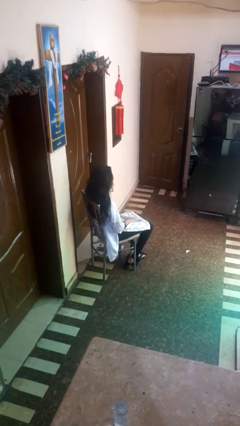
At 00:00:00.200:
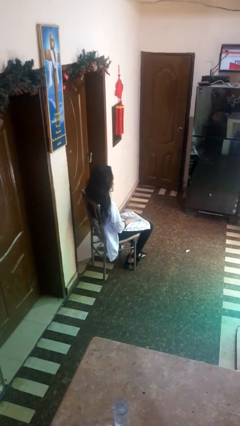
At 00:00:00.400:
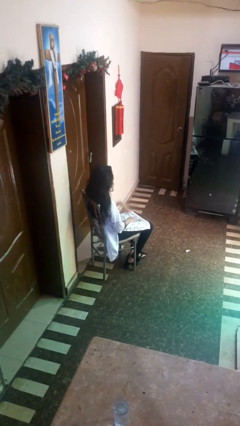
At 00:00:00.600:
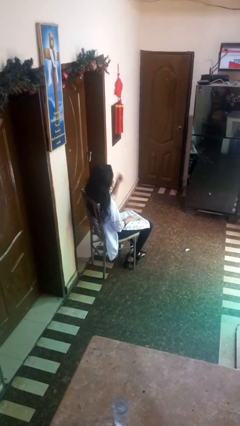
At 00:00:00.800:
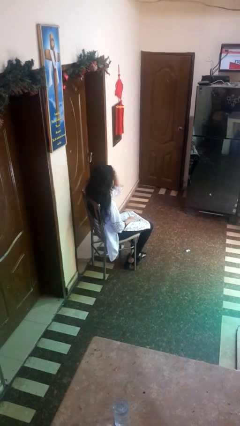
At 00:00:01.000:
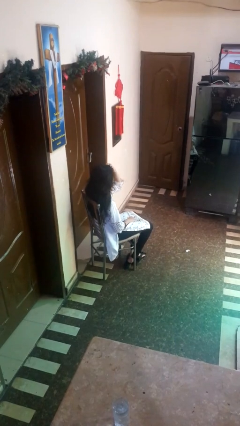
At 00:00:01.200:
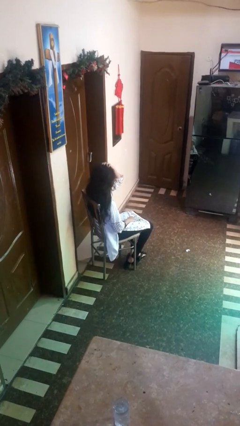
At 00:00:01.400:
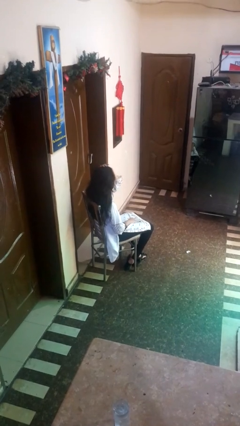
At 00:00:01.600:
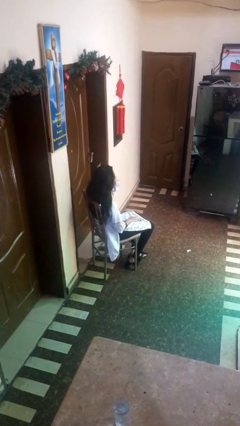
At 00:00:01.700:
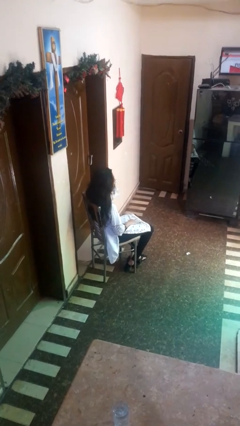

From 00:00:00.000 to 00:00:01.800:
person strokes hair

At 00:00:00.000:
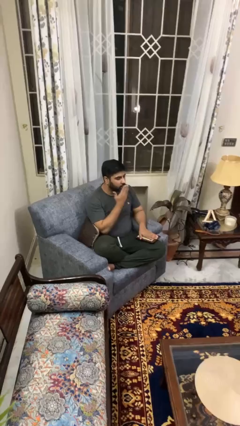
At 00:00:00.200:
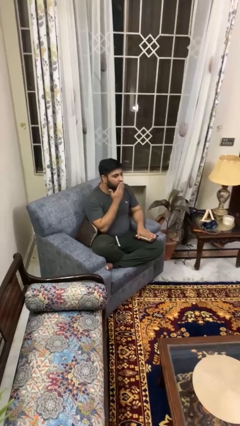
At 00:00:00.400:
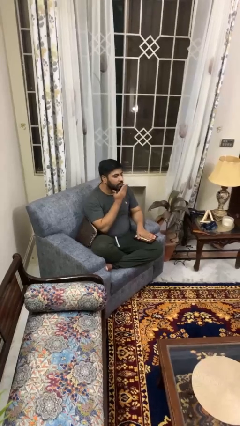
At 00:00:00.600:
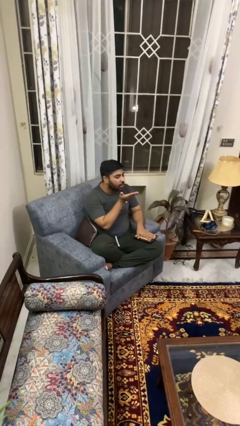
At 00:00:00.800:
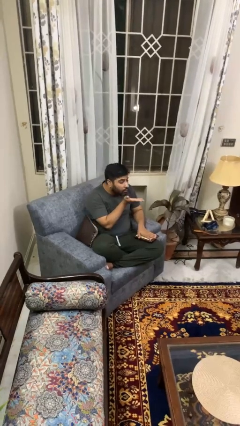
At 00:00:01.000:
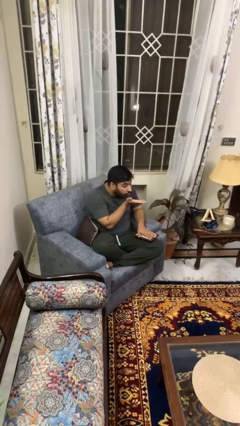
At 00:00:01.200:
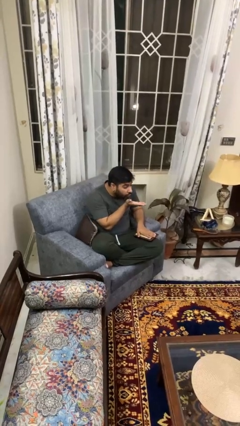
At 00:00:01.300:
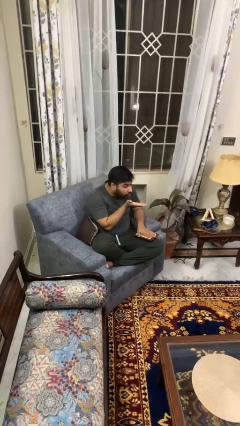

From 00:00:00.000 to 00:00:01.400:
person gestures blow kiss

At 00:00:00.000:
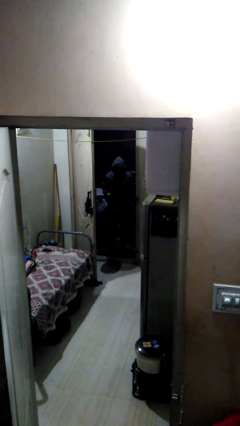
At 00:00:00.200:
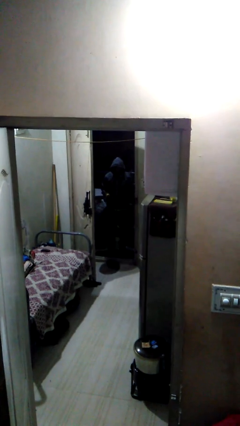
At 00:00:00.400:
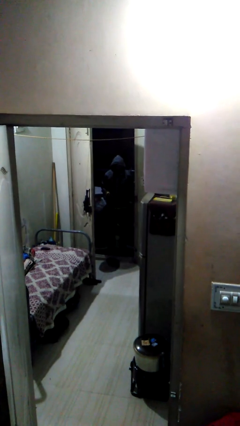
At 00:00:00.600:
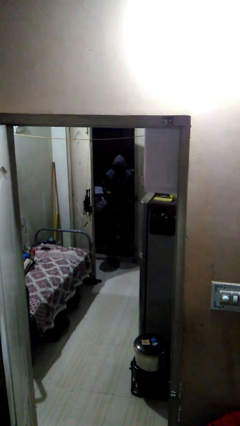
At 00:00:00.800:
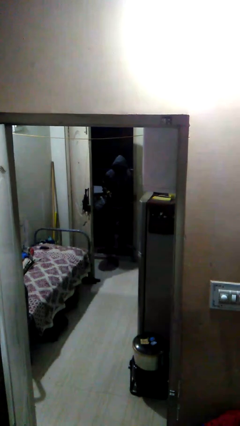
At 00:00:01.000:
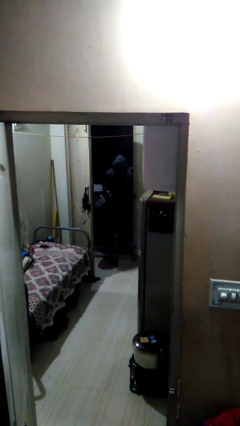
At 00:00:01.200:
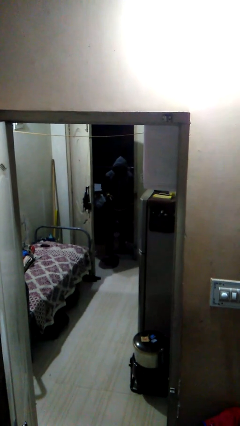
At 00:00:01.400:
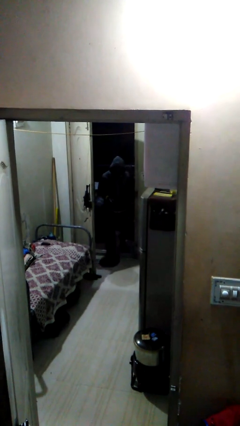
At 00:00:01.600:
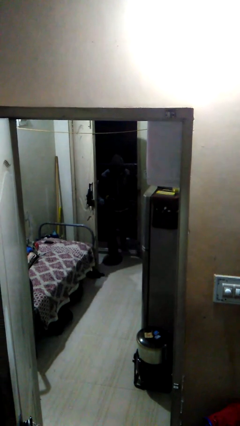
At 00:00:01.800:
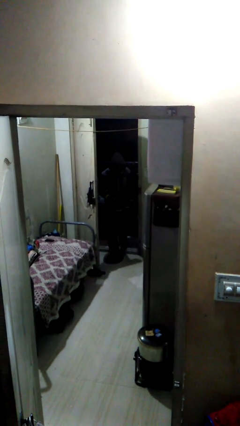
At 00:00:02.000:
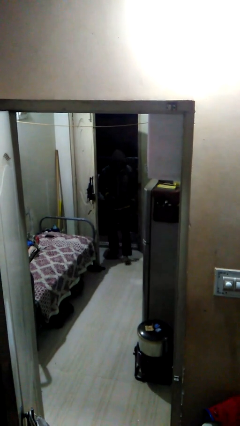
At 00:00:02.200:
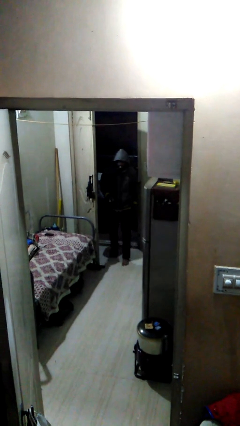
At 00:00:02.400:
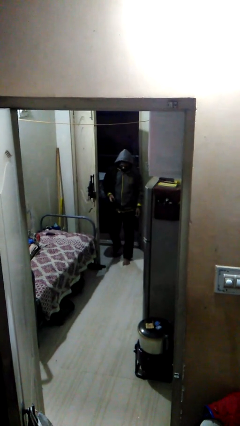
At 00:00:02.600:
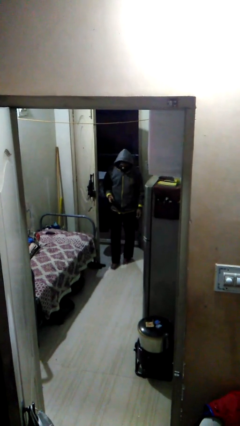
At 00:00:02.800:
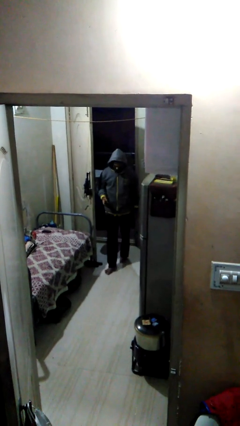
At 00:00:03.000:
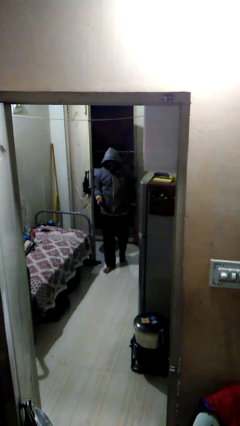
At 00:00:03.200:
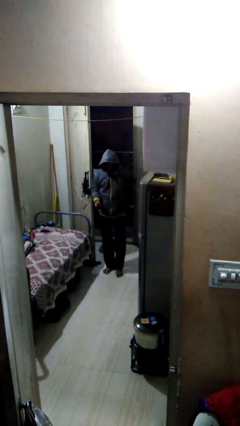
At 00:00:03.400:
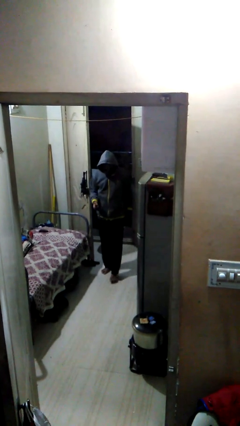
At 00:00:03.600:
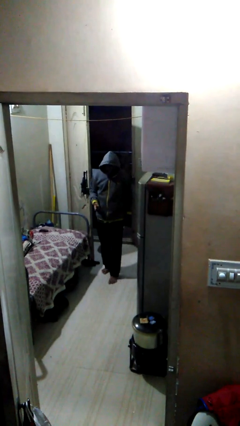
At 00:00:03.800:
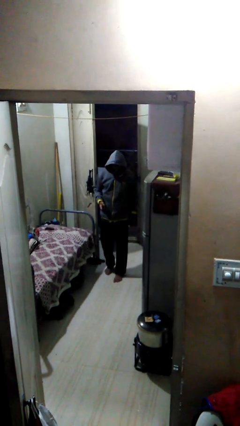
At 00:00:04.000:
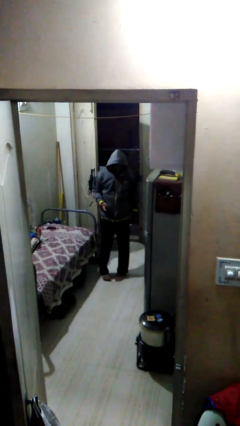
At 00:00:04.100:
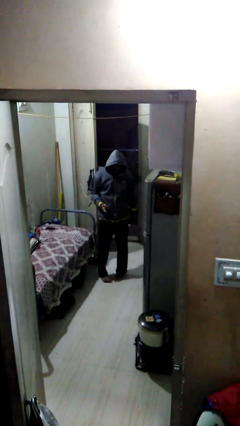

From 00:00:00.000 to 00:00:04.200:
person enters scene through structure

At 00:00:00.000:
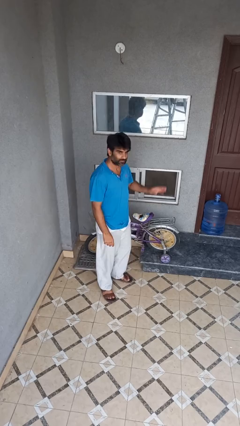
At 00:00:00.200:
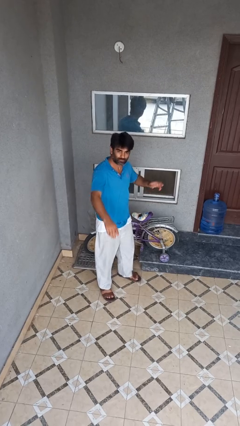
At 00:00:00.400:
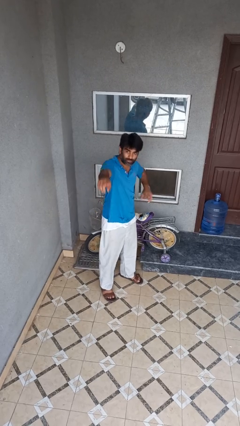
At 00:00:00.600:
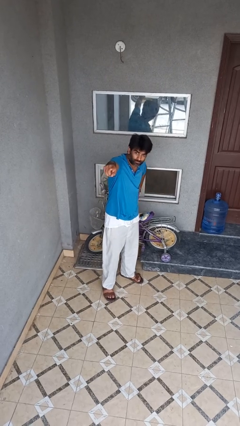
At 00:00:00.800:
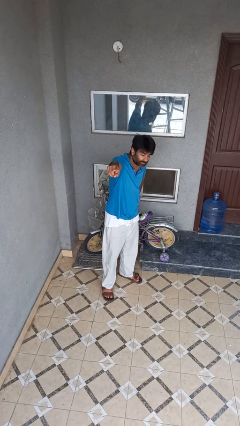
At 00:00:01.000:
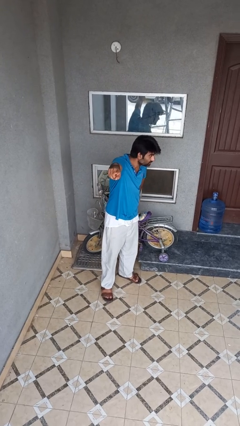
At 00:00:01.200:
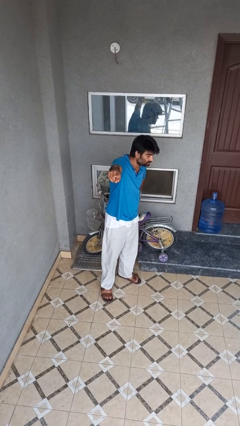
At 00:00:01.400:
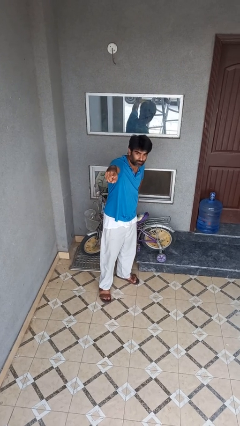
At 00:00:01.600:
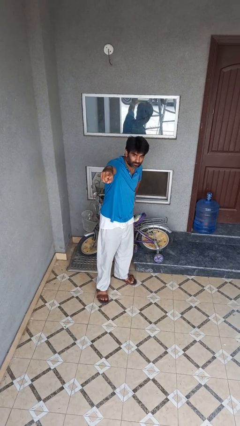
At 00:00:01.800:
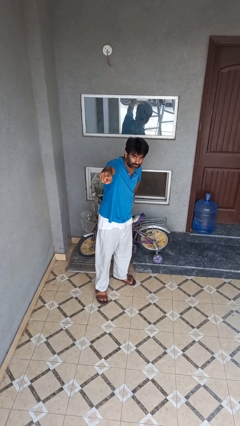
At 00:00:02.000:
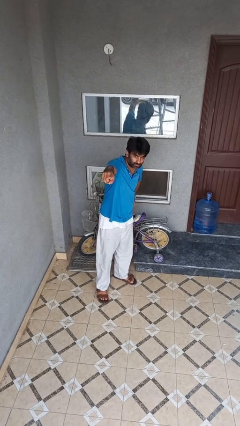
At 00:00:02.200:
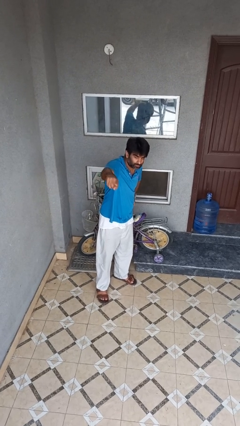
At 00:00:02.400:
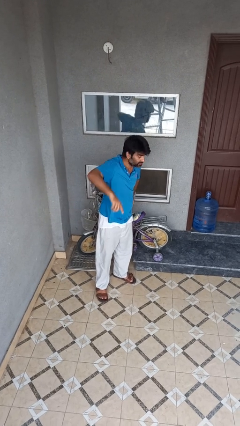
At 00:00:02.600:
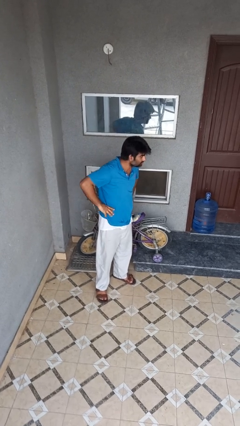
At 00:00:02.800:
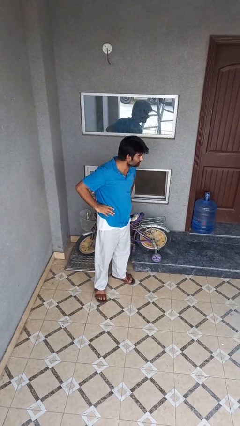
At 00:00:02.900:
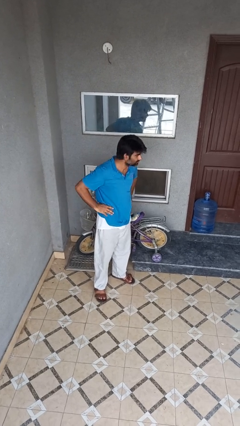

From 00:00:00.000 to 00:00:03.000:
person points at person

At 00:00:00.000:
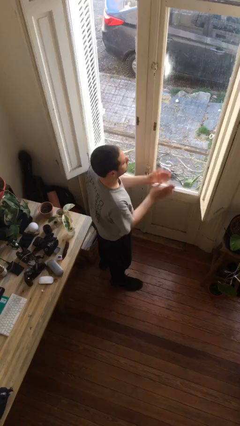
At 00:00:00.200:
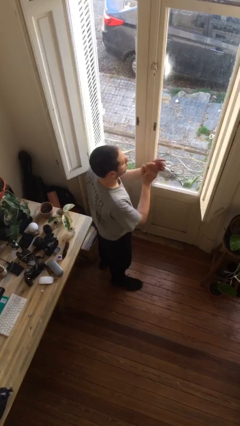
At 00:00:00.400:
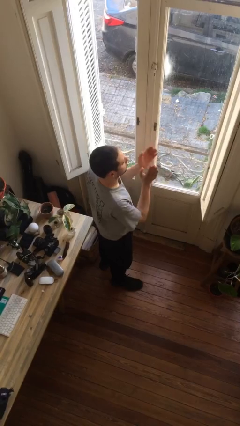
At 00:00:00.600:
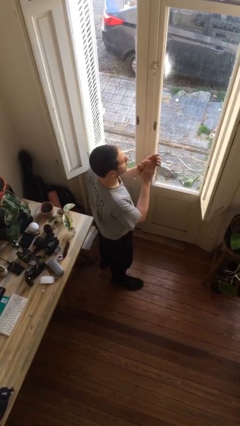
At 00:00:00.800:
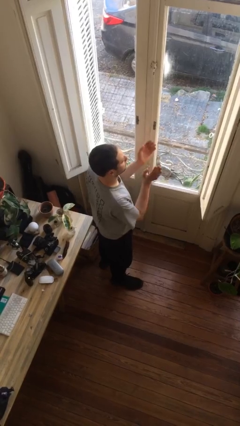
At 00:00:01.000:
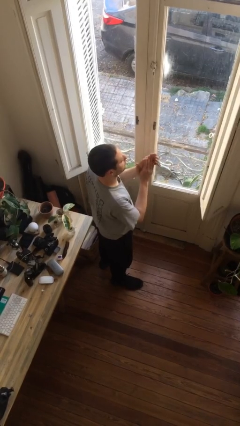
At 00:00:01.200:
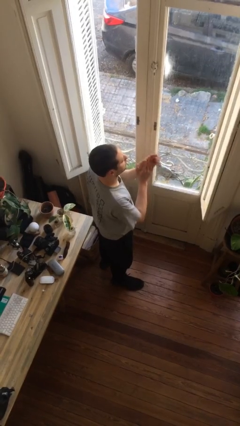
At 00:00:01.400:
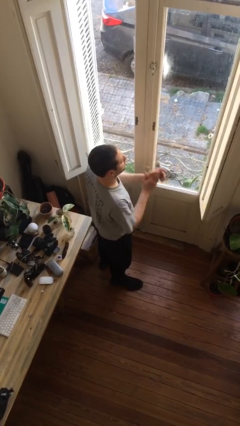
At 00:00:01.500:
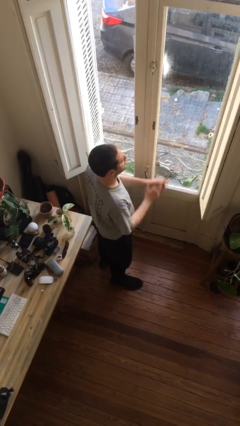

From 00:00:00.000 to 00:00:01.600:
person claps hands

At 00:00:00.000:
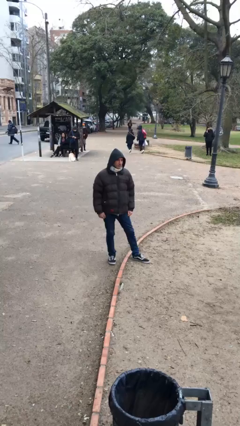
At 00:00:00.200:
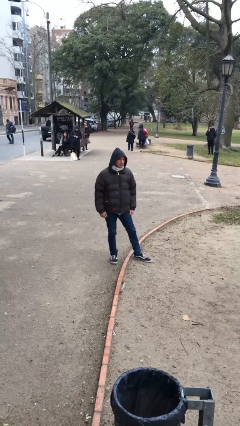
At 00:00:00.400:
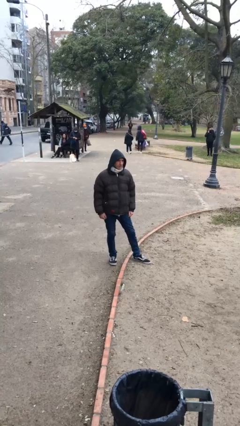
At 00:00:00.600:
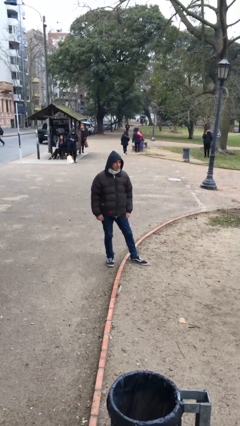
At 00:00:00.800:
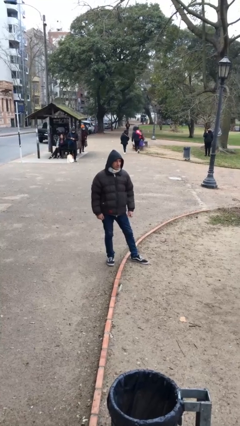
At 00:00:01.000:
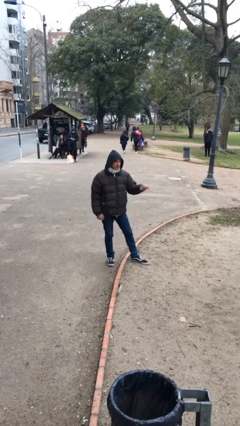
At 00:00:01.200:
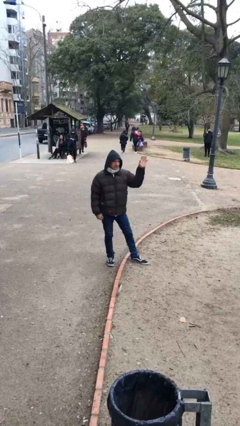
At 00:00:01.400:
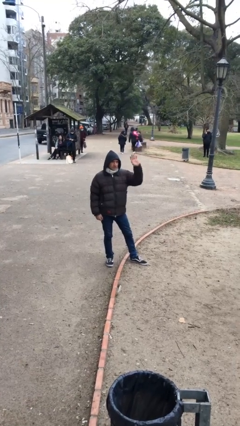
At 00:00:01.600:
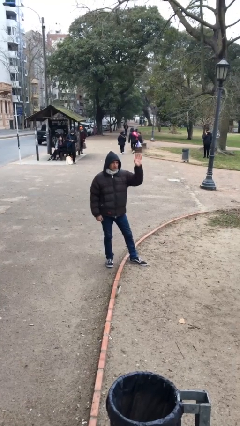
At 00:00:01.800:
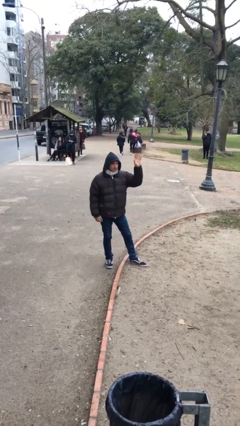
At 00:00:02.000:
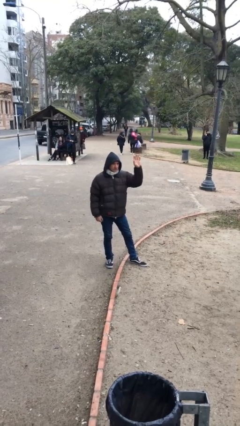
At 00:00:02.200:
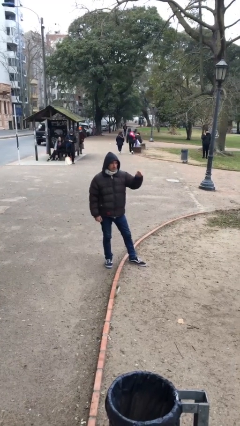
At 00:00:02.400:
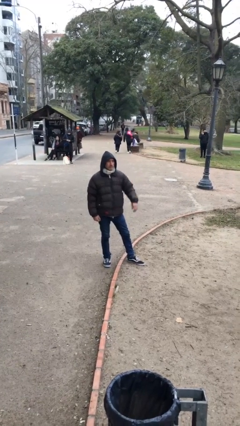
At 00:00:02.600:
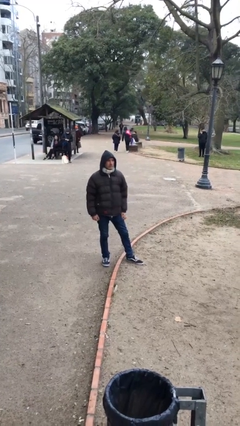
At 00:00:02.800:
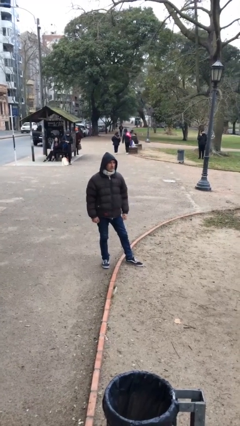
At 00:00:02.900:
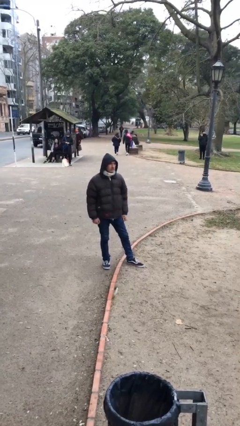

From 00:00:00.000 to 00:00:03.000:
person waves at person

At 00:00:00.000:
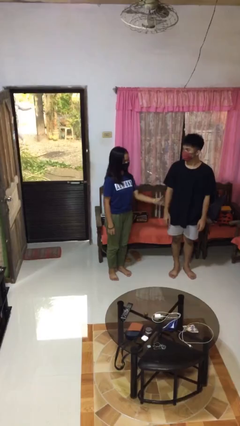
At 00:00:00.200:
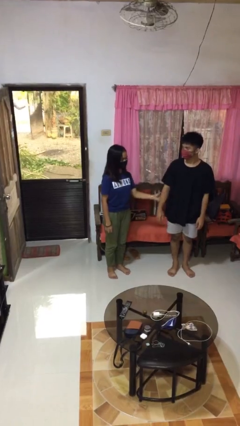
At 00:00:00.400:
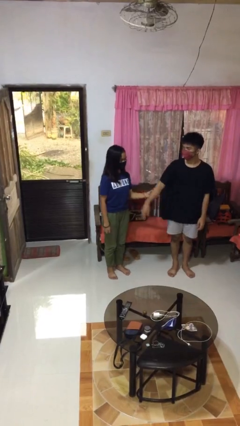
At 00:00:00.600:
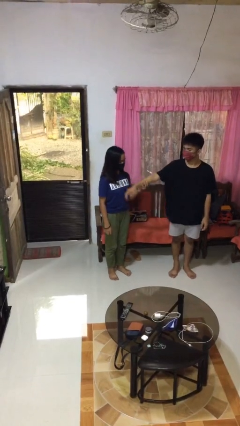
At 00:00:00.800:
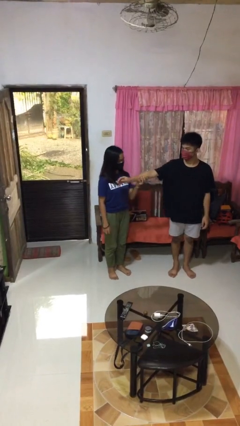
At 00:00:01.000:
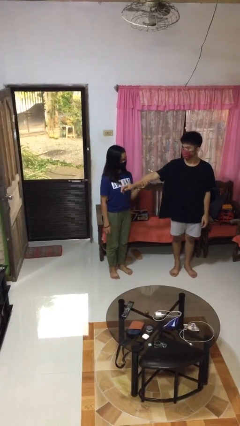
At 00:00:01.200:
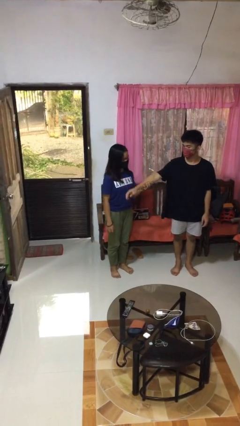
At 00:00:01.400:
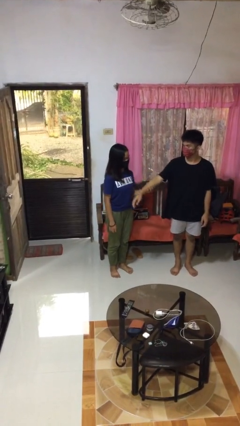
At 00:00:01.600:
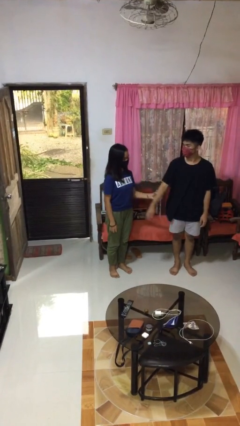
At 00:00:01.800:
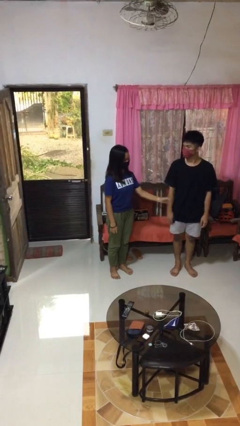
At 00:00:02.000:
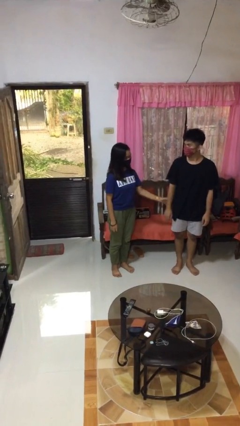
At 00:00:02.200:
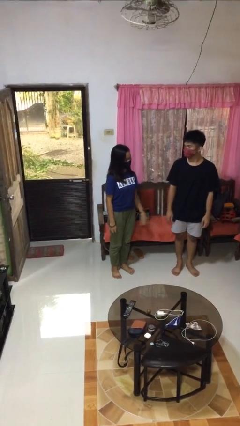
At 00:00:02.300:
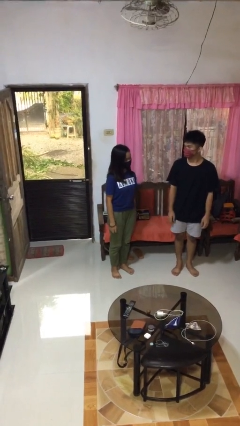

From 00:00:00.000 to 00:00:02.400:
person grabs person by forearm
